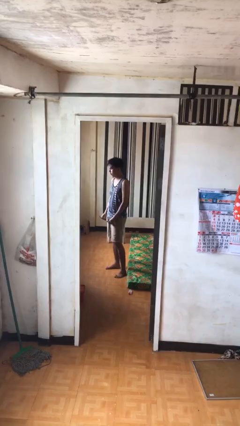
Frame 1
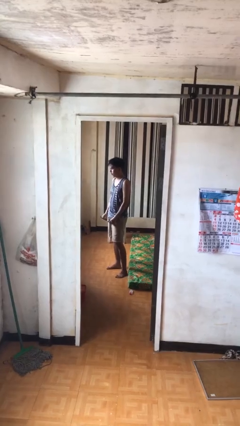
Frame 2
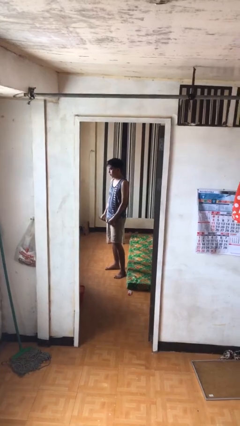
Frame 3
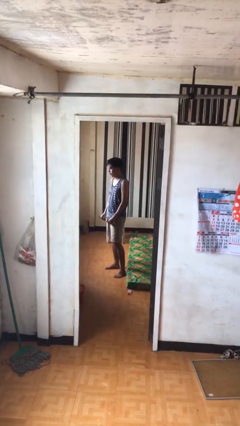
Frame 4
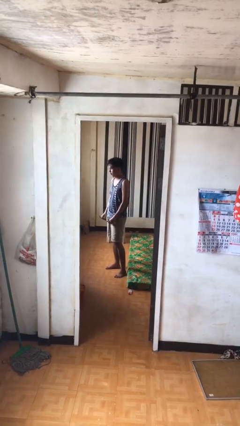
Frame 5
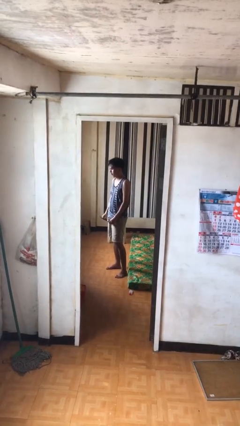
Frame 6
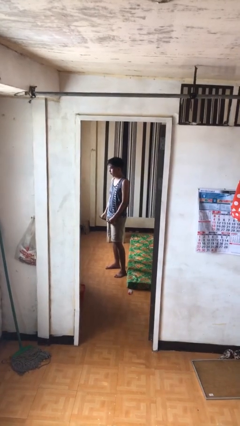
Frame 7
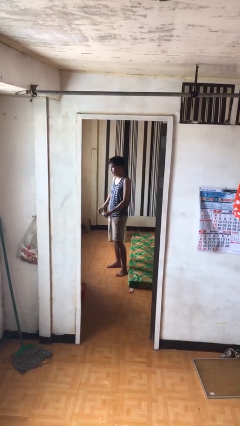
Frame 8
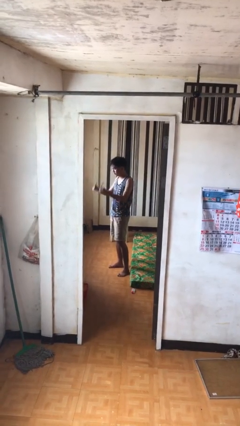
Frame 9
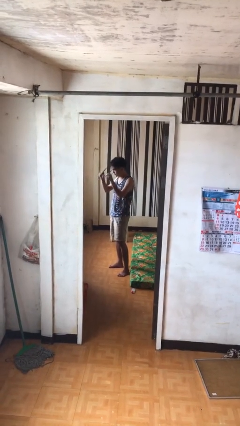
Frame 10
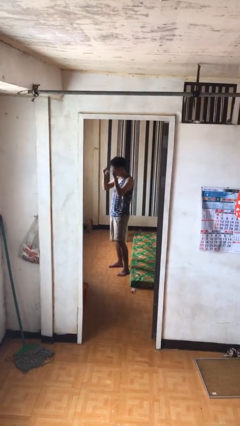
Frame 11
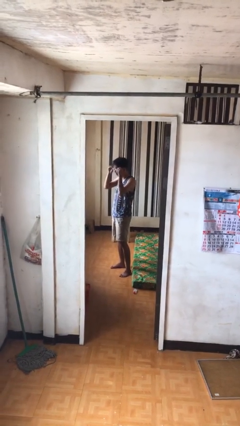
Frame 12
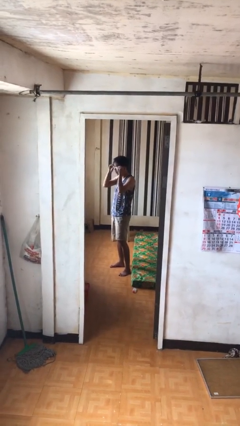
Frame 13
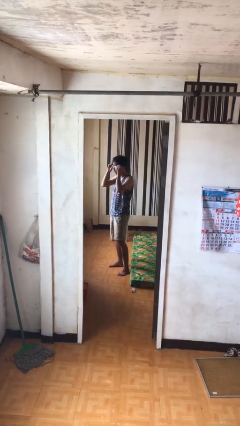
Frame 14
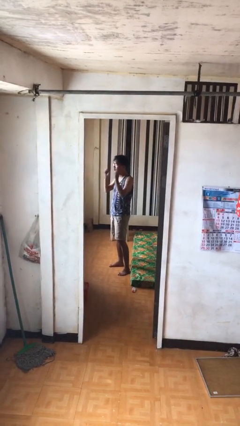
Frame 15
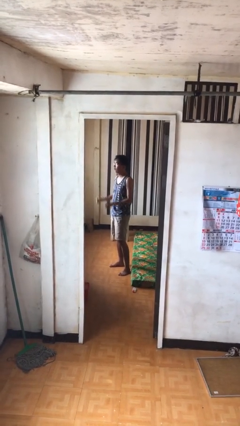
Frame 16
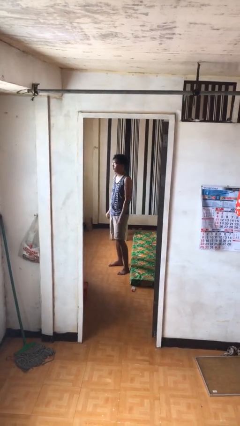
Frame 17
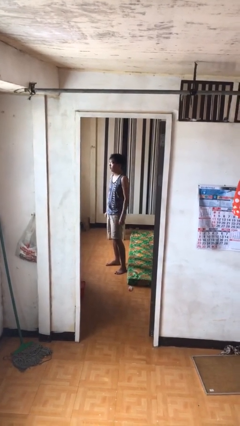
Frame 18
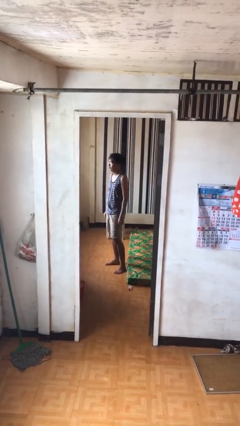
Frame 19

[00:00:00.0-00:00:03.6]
person puts on glasses

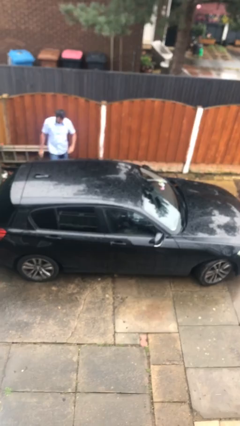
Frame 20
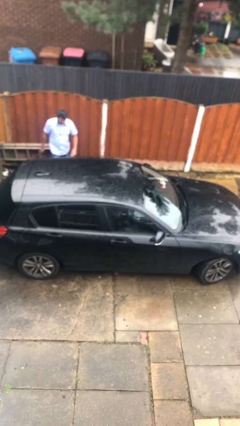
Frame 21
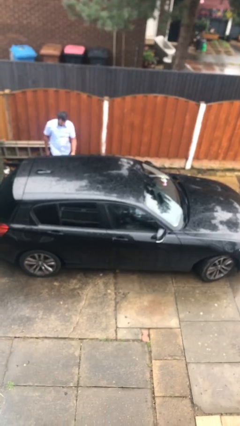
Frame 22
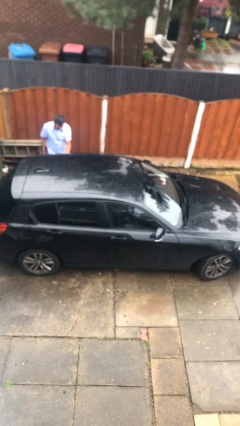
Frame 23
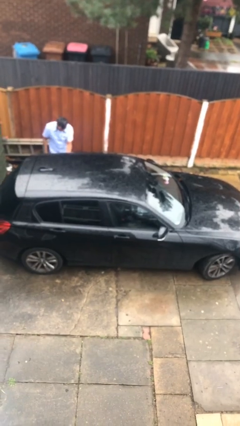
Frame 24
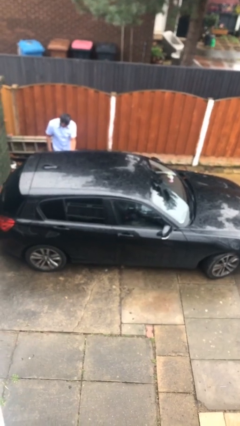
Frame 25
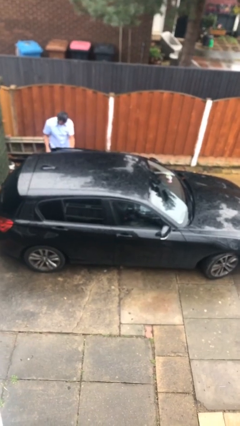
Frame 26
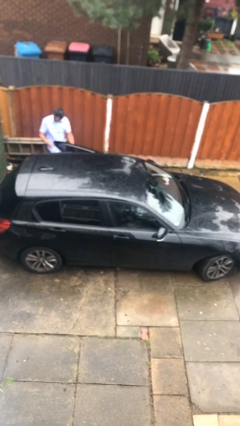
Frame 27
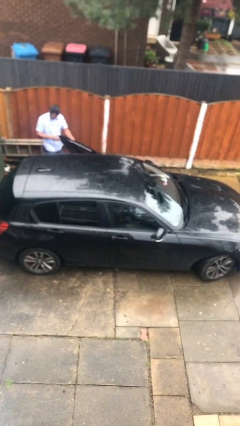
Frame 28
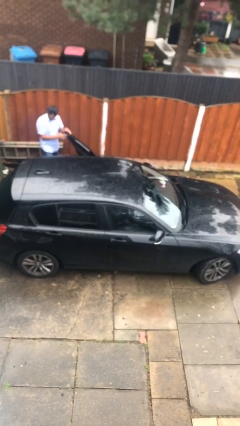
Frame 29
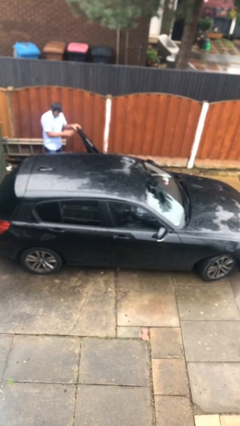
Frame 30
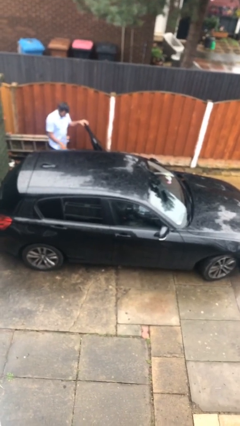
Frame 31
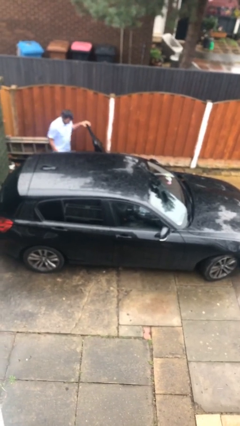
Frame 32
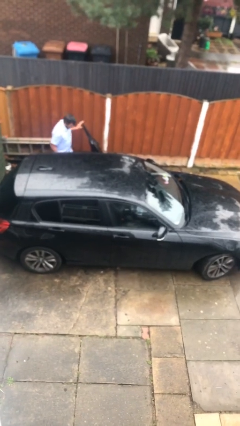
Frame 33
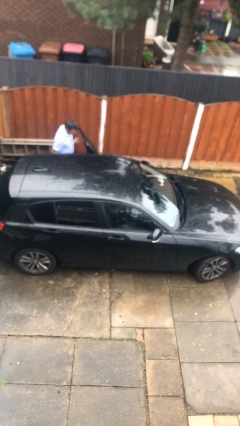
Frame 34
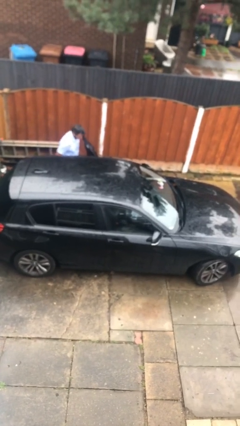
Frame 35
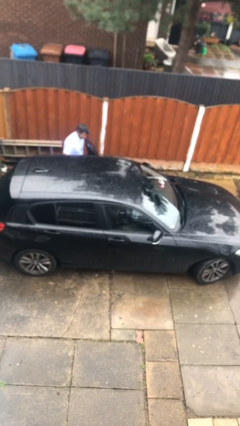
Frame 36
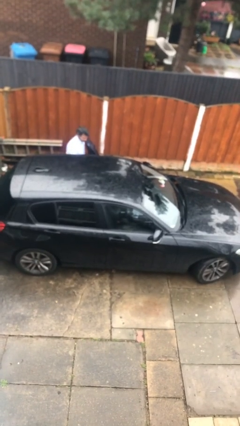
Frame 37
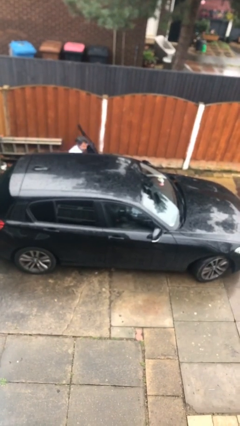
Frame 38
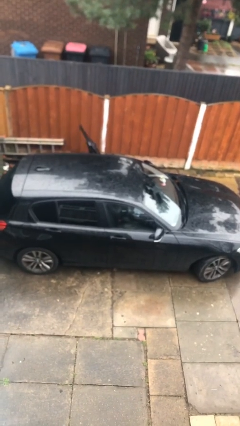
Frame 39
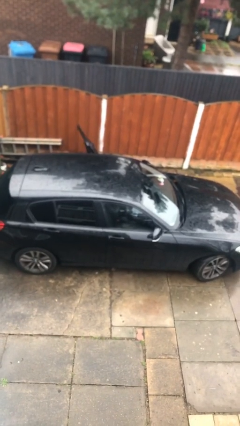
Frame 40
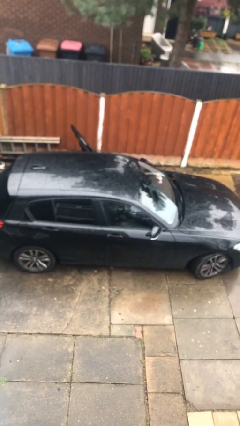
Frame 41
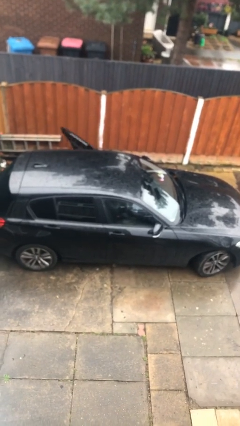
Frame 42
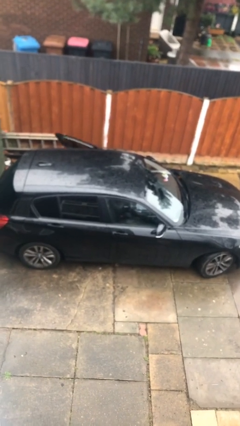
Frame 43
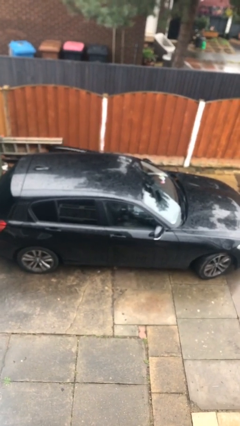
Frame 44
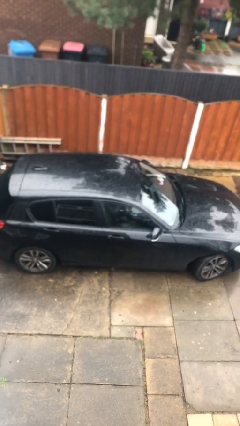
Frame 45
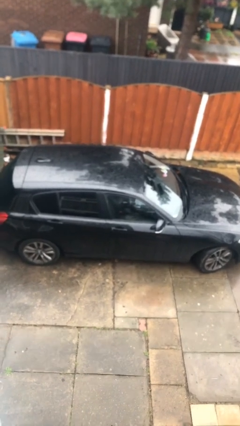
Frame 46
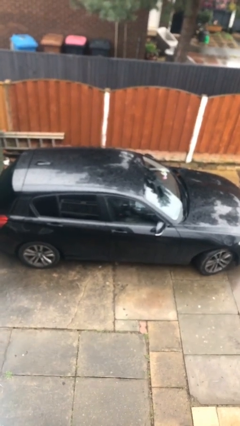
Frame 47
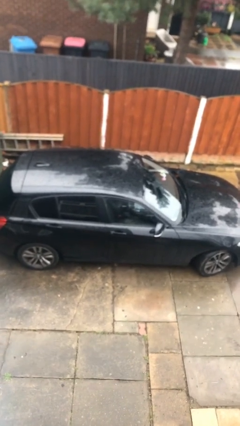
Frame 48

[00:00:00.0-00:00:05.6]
car picks up person

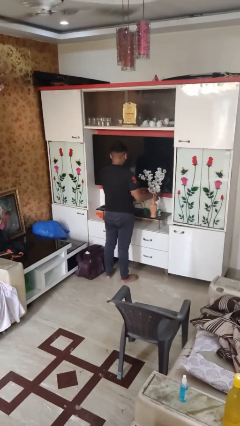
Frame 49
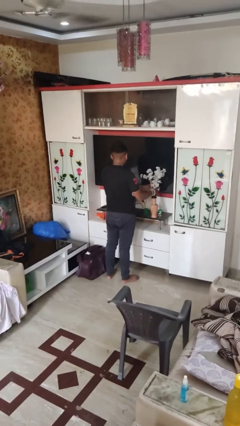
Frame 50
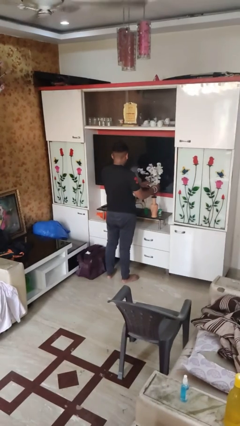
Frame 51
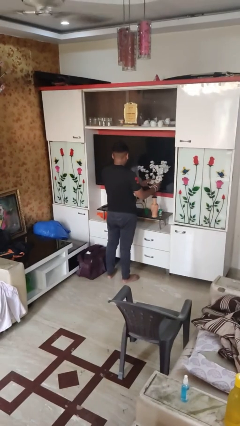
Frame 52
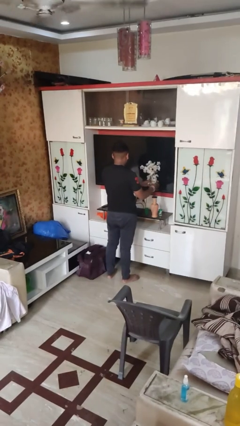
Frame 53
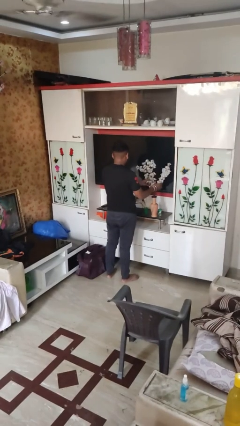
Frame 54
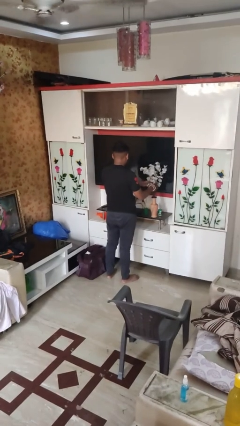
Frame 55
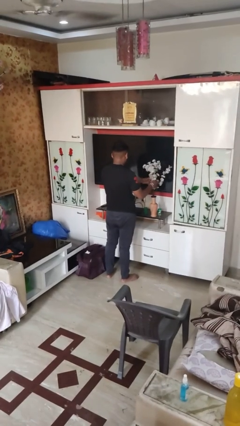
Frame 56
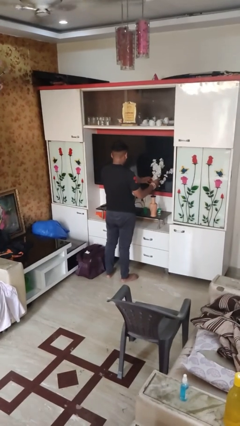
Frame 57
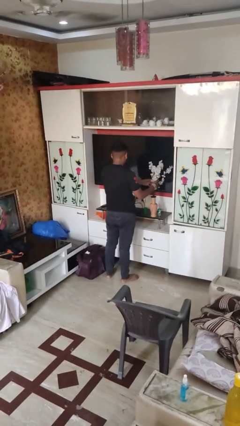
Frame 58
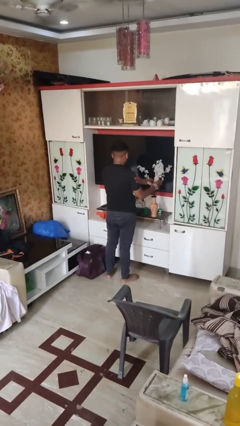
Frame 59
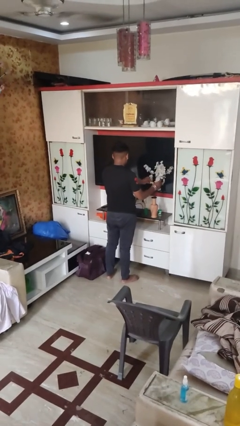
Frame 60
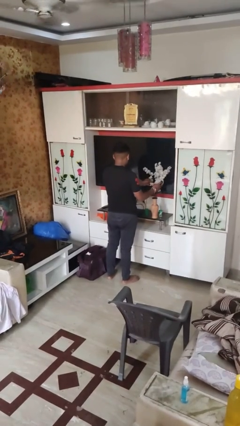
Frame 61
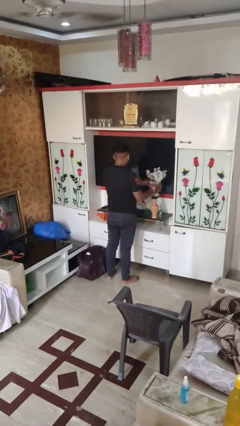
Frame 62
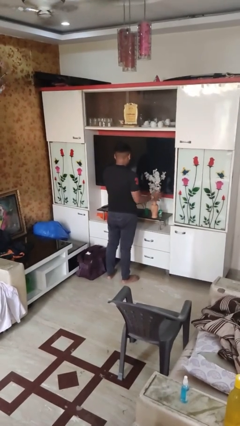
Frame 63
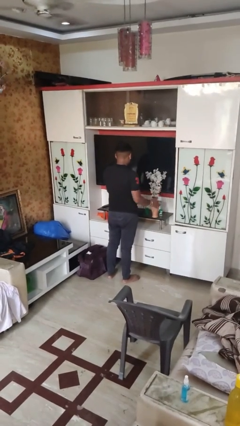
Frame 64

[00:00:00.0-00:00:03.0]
person arranges flowers in vase

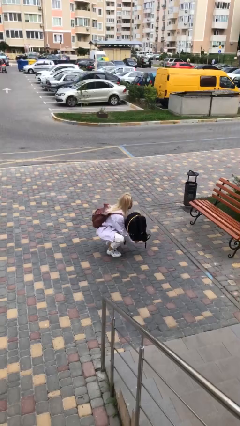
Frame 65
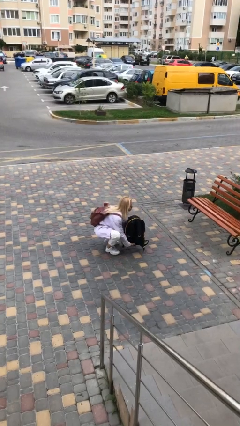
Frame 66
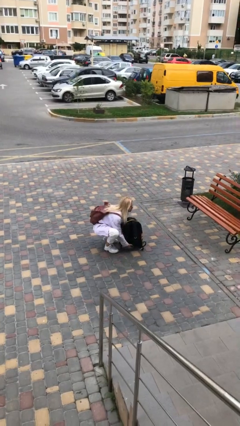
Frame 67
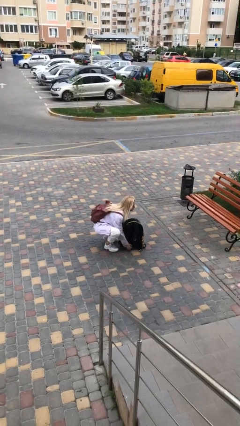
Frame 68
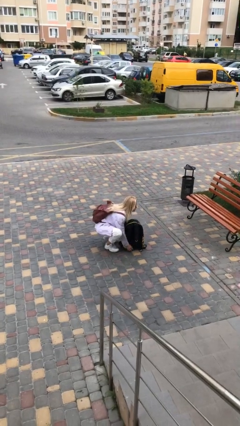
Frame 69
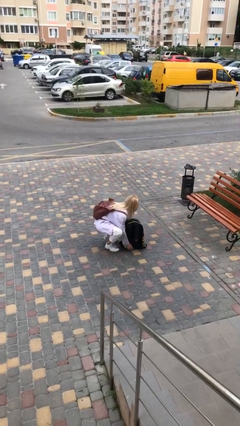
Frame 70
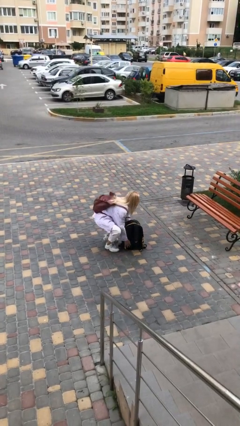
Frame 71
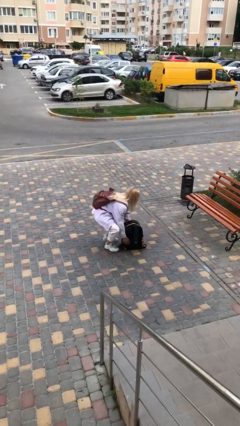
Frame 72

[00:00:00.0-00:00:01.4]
person puts down object on floor

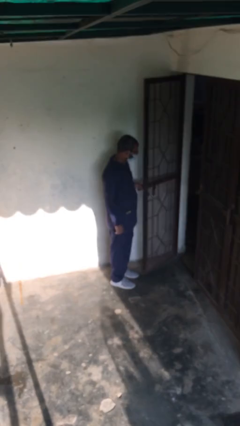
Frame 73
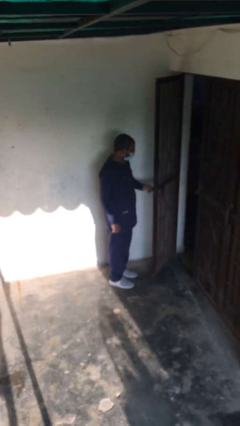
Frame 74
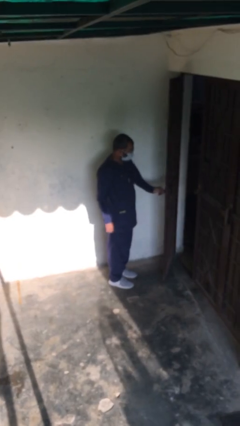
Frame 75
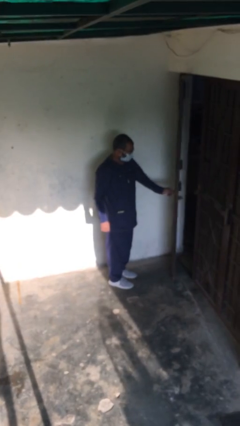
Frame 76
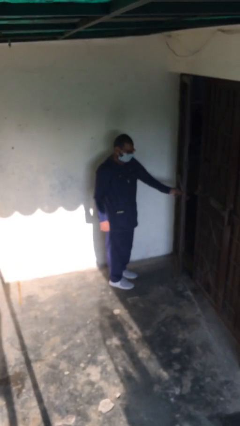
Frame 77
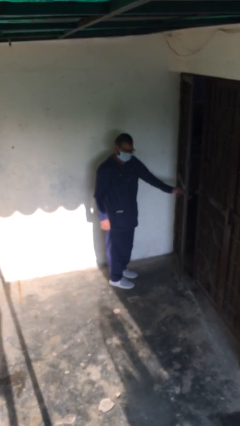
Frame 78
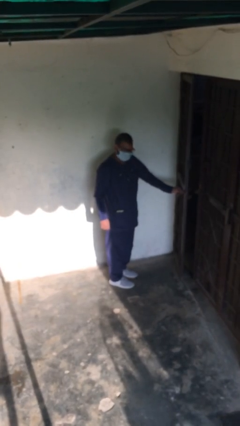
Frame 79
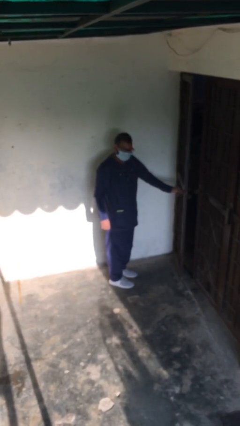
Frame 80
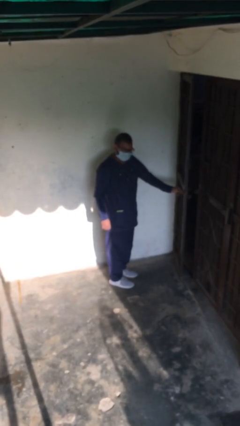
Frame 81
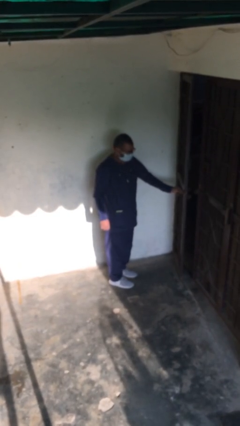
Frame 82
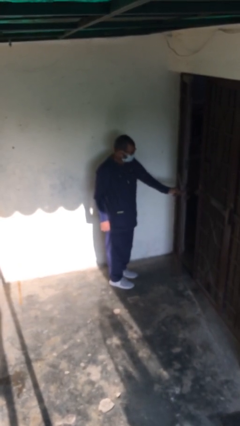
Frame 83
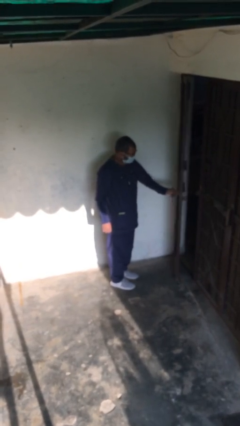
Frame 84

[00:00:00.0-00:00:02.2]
person closes facility door

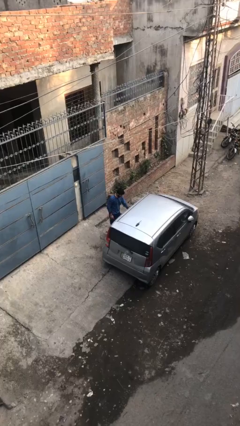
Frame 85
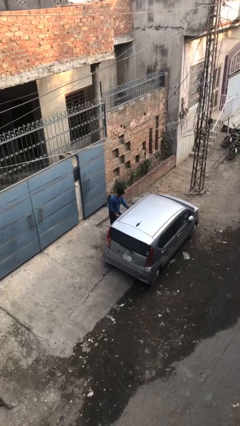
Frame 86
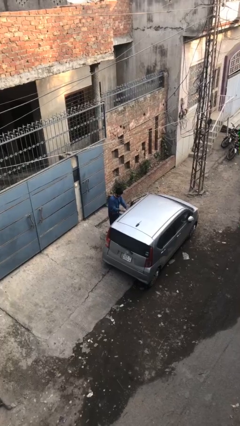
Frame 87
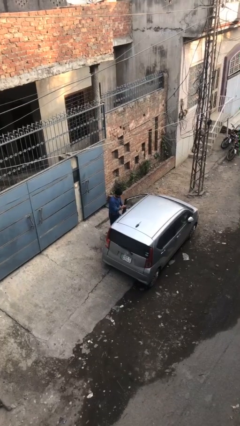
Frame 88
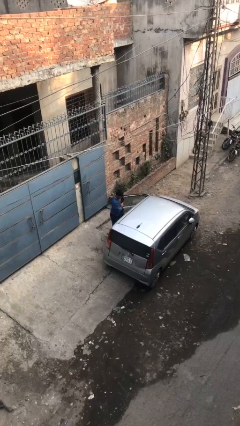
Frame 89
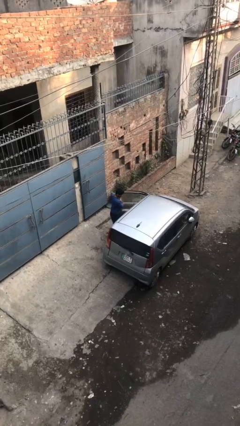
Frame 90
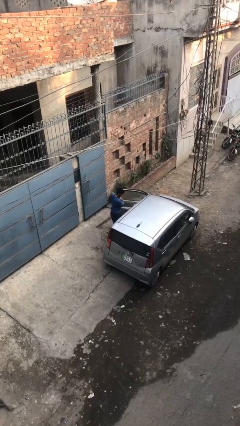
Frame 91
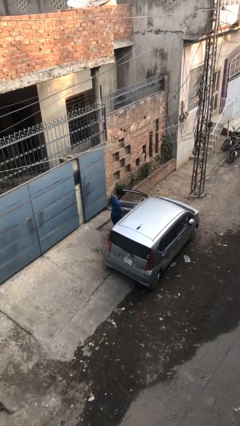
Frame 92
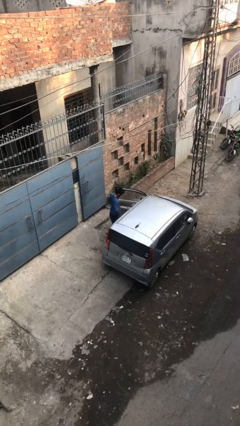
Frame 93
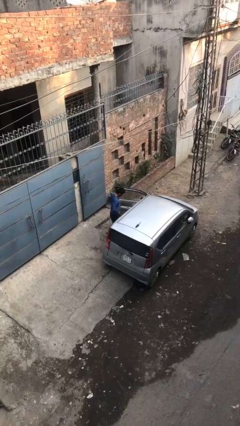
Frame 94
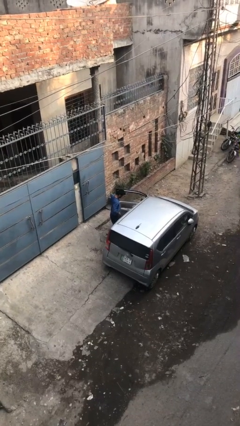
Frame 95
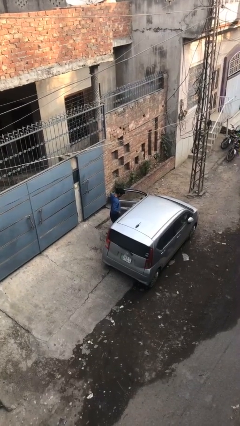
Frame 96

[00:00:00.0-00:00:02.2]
person opens car door
